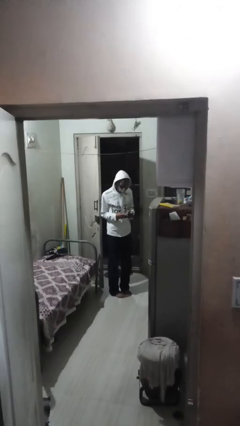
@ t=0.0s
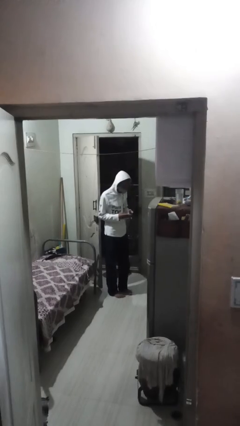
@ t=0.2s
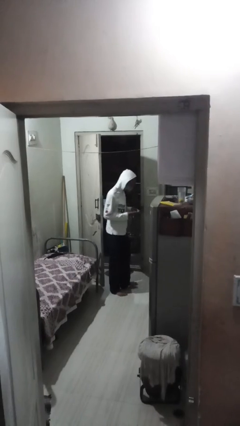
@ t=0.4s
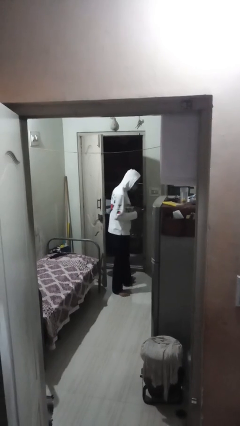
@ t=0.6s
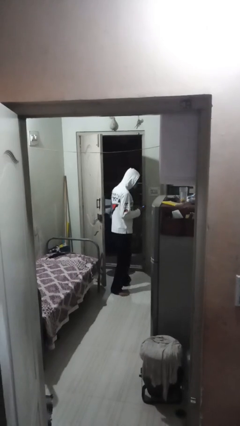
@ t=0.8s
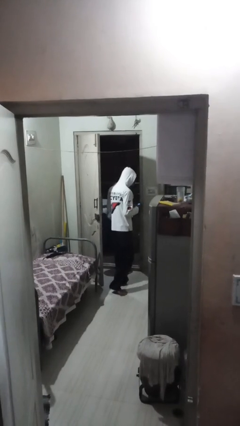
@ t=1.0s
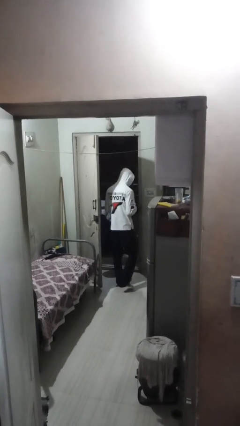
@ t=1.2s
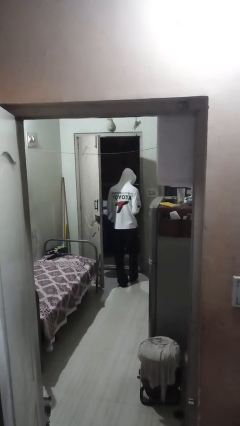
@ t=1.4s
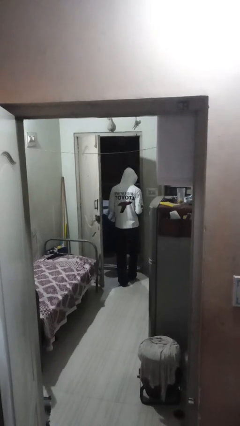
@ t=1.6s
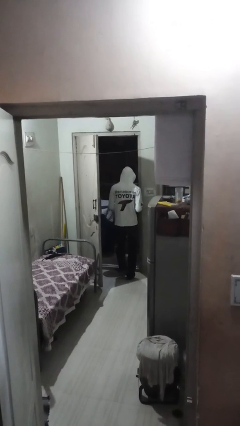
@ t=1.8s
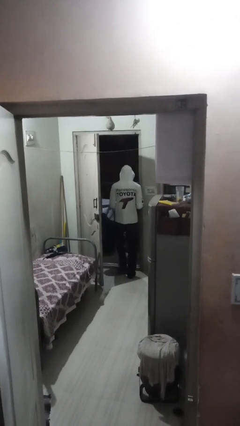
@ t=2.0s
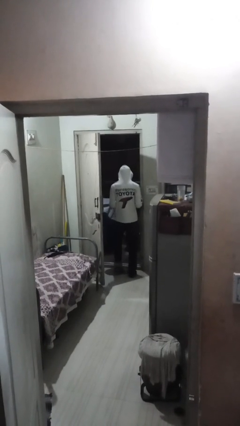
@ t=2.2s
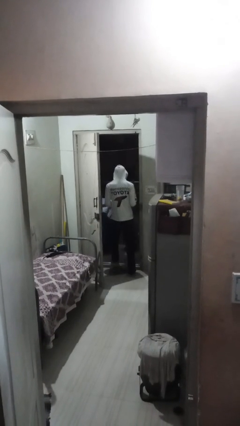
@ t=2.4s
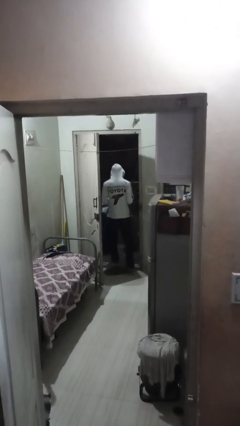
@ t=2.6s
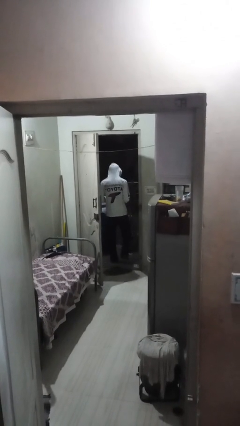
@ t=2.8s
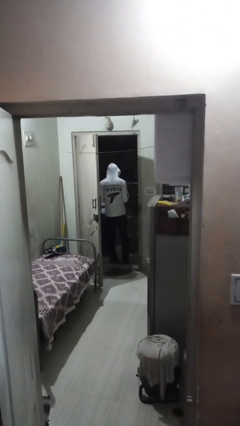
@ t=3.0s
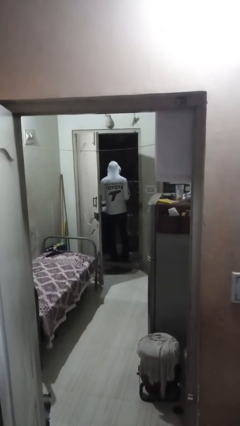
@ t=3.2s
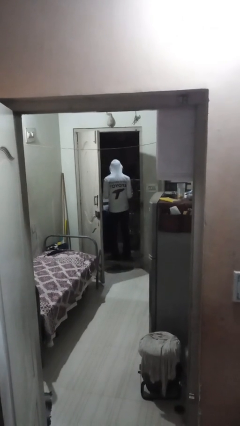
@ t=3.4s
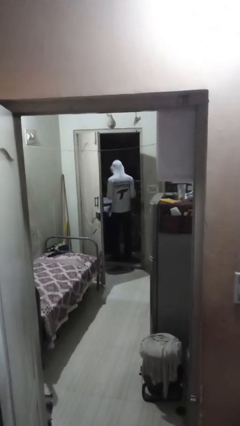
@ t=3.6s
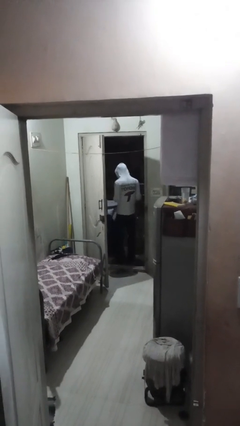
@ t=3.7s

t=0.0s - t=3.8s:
person exits scene through structure

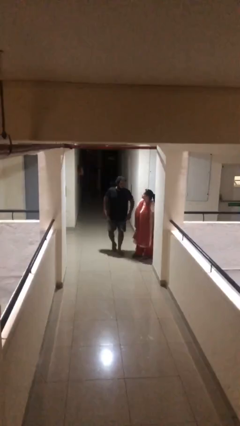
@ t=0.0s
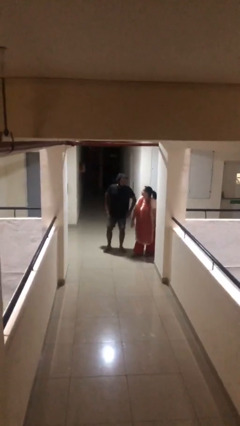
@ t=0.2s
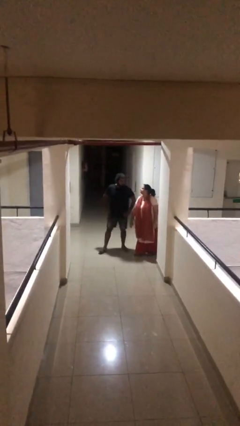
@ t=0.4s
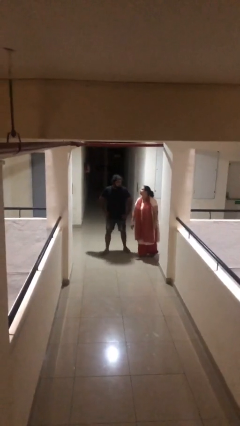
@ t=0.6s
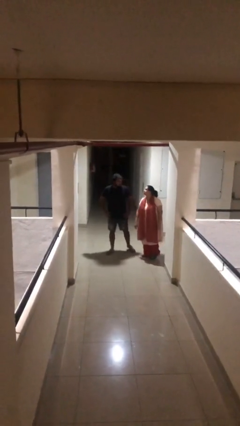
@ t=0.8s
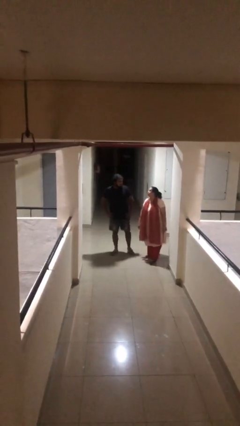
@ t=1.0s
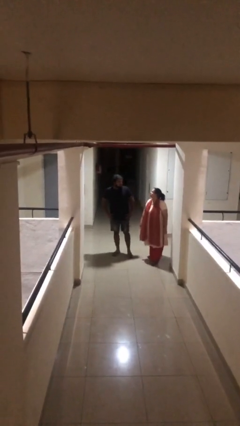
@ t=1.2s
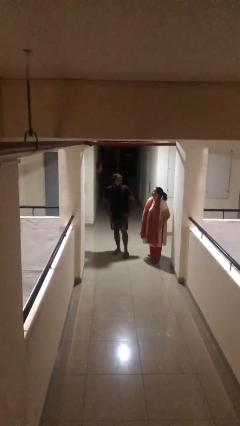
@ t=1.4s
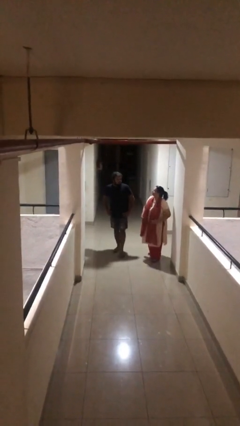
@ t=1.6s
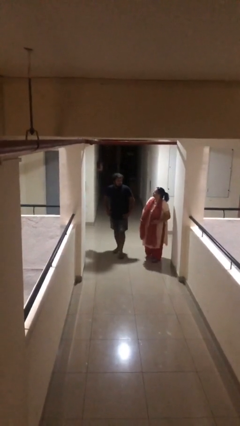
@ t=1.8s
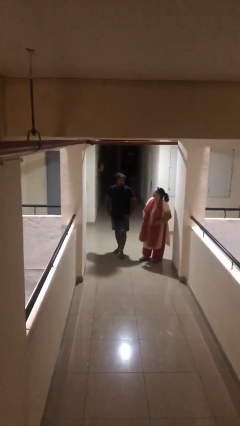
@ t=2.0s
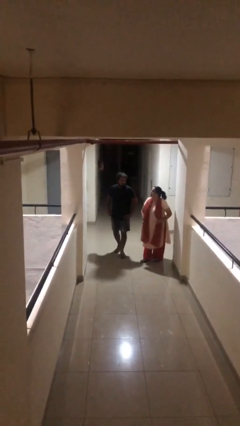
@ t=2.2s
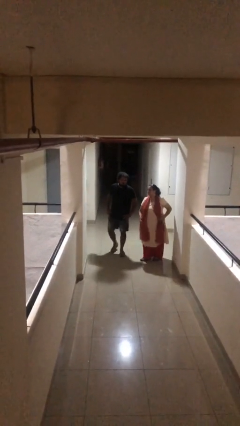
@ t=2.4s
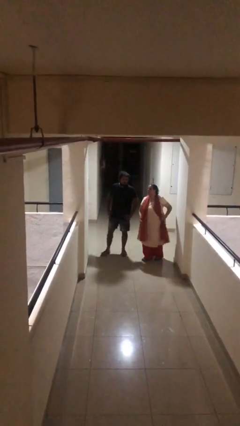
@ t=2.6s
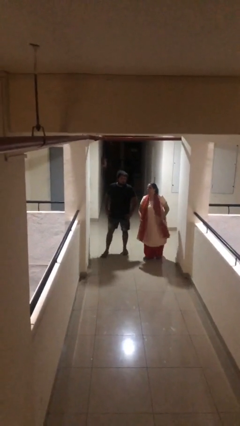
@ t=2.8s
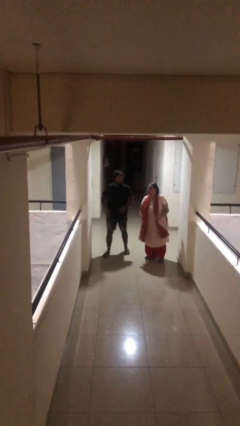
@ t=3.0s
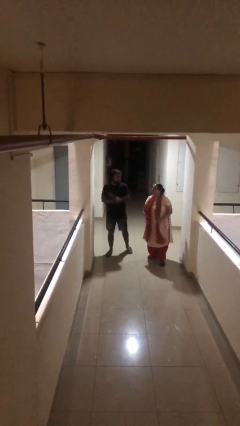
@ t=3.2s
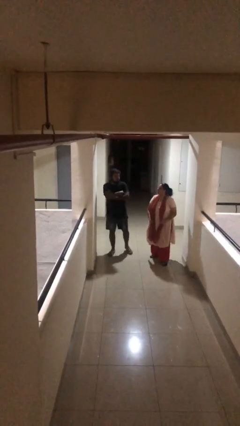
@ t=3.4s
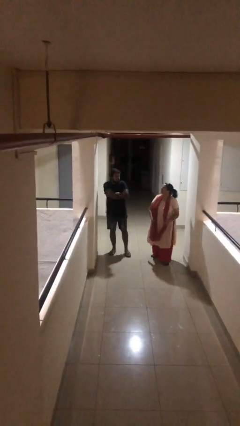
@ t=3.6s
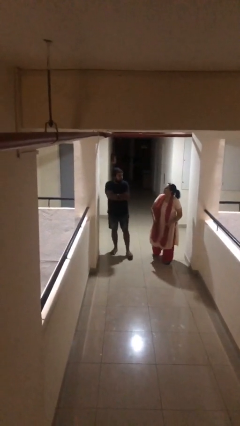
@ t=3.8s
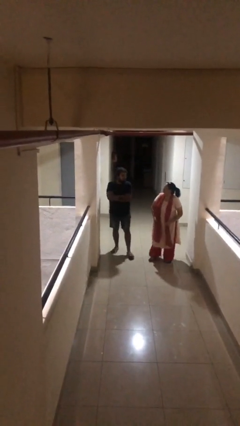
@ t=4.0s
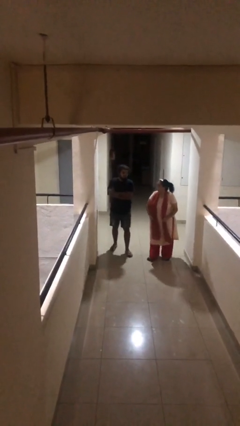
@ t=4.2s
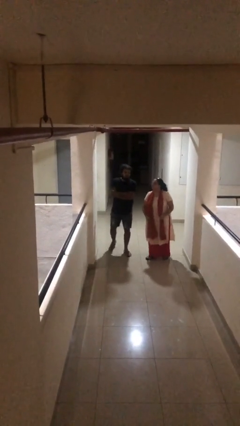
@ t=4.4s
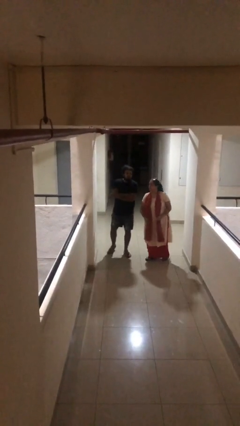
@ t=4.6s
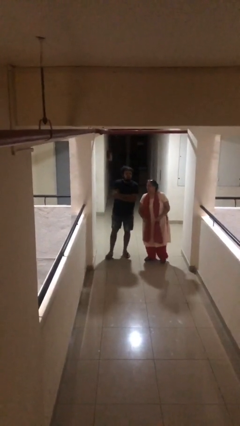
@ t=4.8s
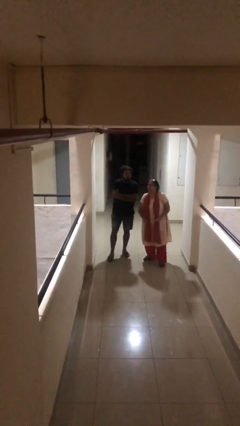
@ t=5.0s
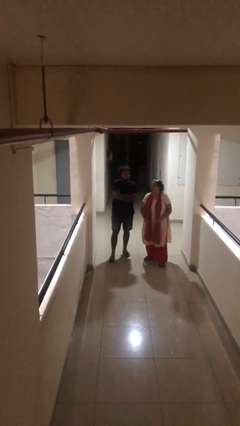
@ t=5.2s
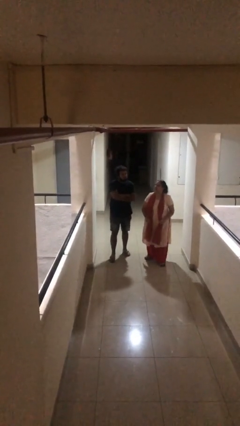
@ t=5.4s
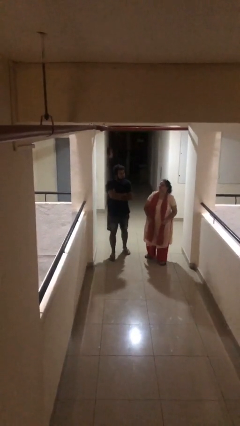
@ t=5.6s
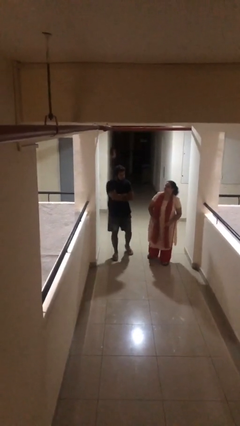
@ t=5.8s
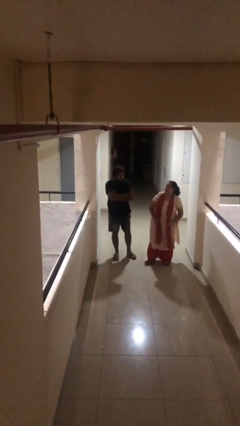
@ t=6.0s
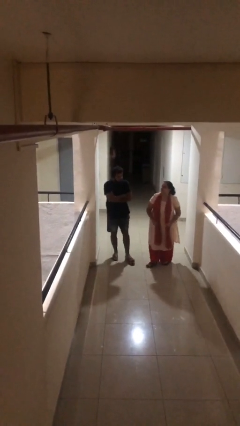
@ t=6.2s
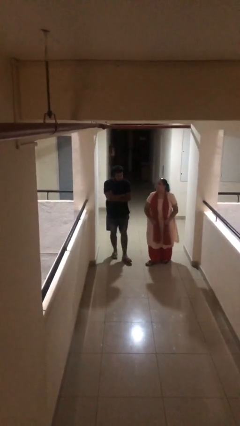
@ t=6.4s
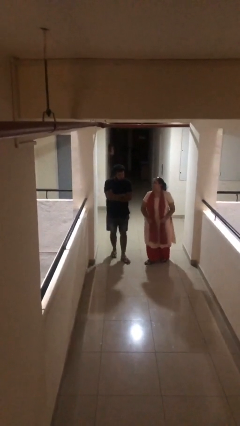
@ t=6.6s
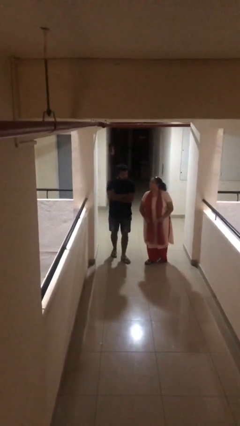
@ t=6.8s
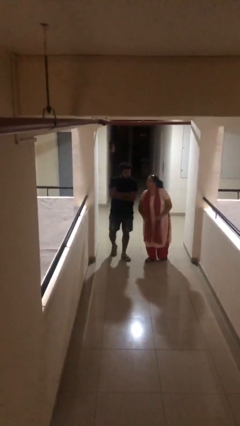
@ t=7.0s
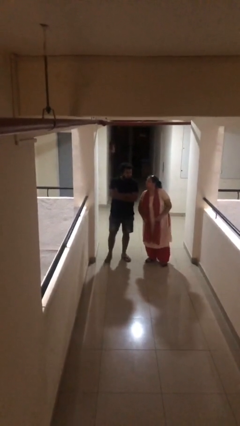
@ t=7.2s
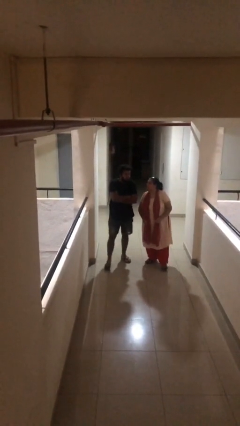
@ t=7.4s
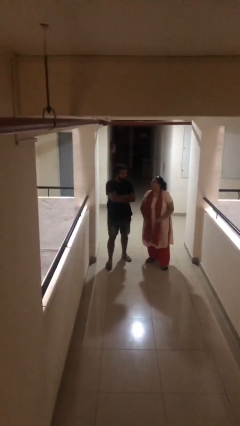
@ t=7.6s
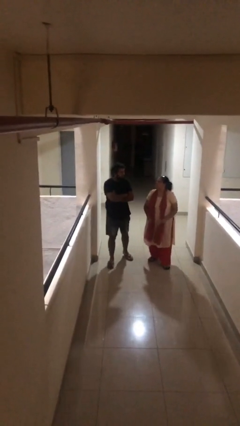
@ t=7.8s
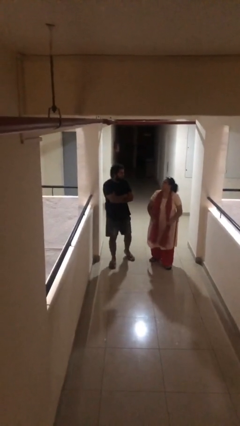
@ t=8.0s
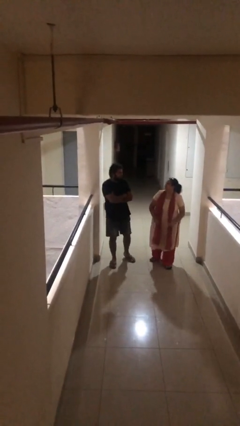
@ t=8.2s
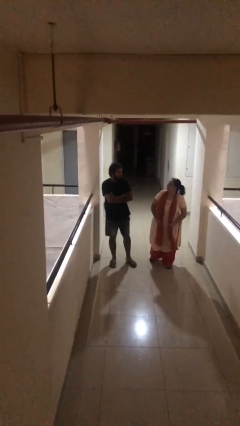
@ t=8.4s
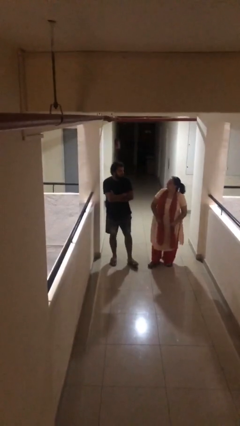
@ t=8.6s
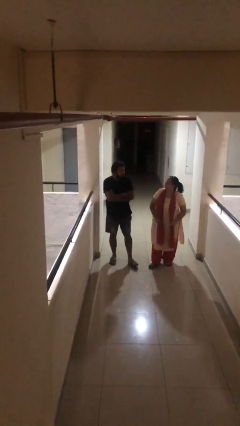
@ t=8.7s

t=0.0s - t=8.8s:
person talks to person

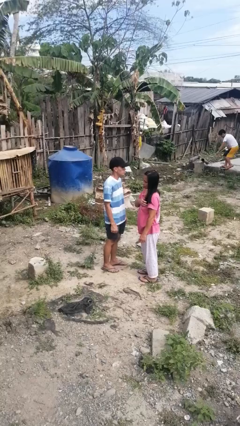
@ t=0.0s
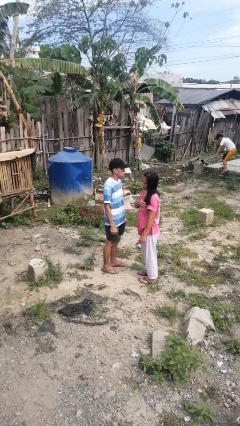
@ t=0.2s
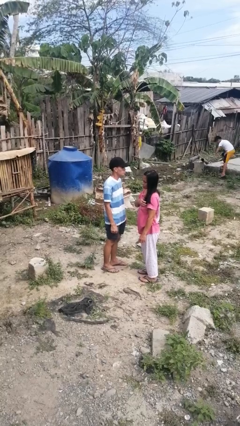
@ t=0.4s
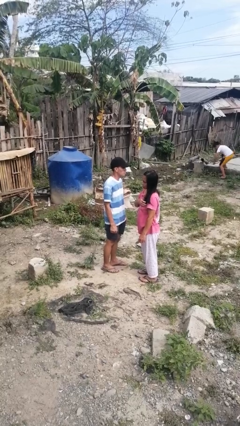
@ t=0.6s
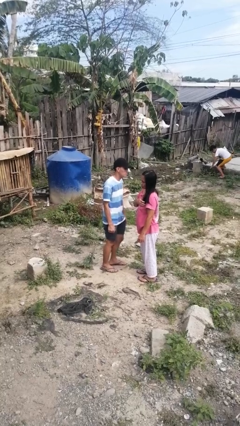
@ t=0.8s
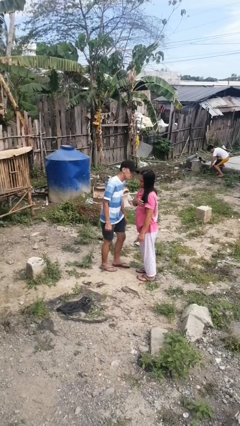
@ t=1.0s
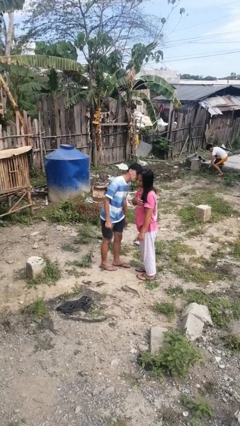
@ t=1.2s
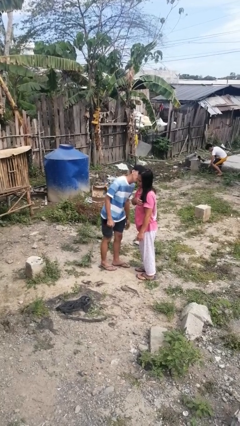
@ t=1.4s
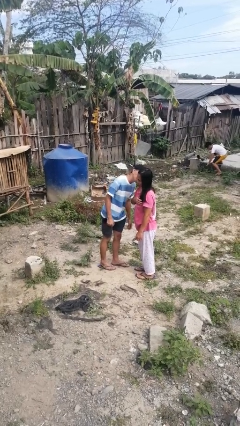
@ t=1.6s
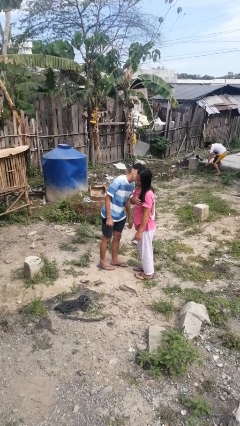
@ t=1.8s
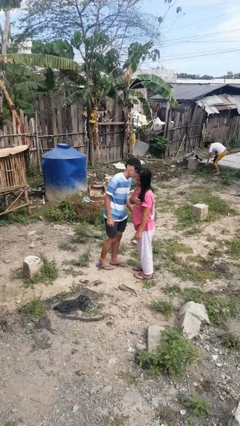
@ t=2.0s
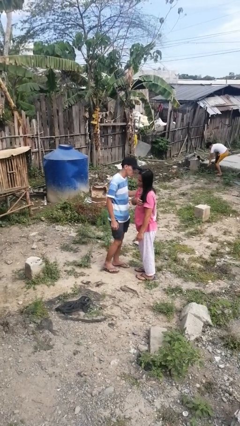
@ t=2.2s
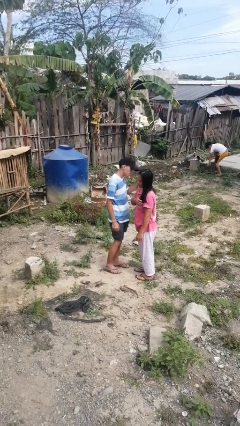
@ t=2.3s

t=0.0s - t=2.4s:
person kisses cheek of person

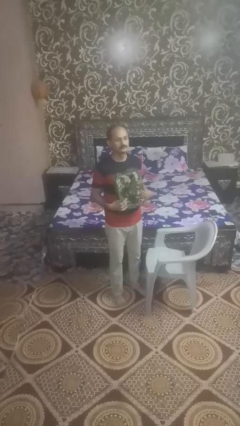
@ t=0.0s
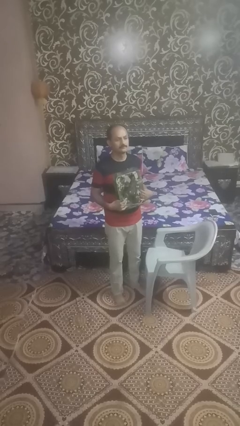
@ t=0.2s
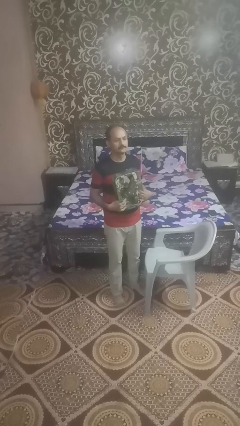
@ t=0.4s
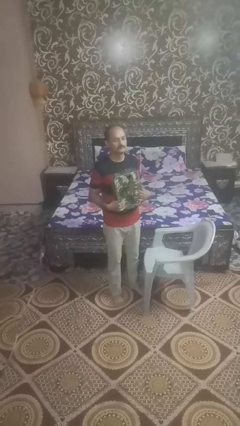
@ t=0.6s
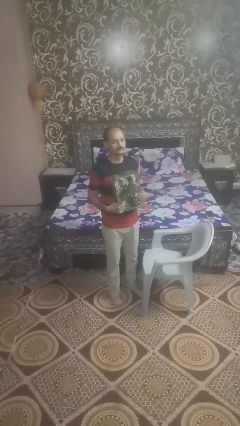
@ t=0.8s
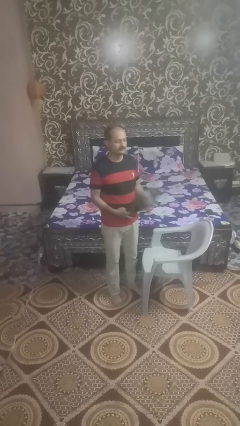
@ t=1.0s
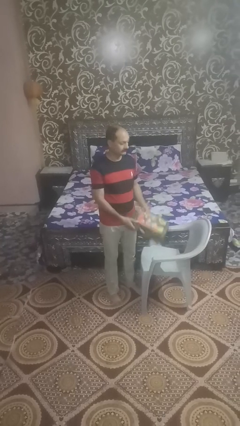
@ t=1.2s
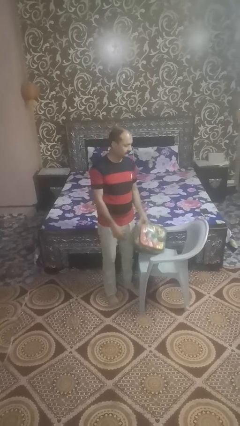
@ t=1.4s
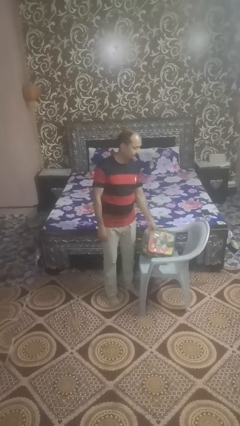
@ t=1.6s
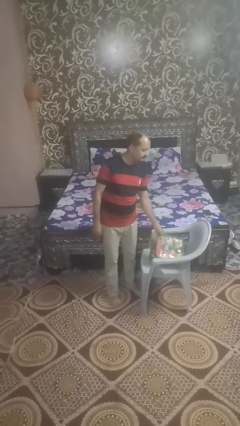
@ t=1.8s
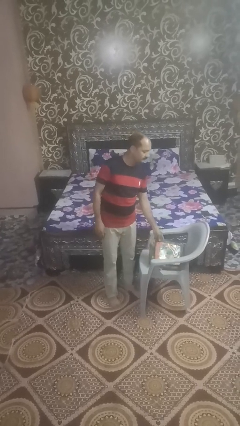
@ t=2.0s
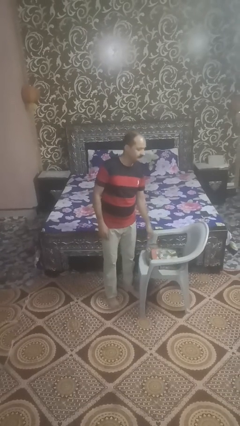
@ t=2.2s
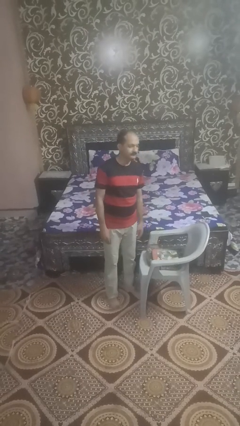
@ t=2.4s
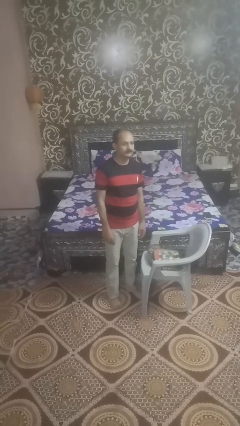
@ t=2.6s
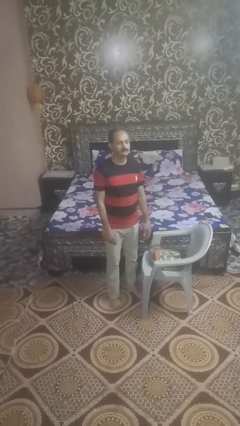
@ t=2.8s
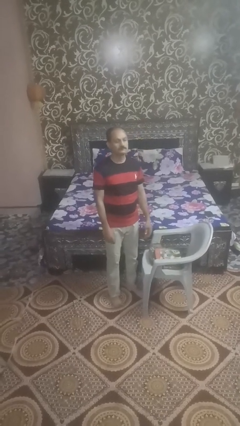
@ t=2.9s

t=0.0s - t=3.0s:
person puts down object on couch
